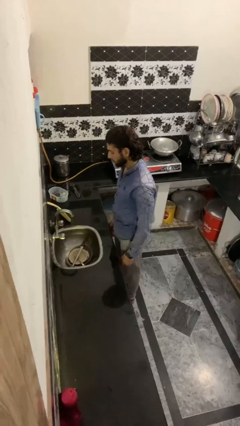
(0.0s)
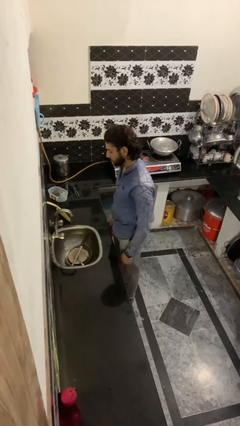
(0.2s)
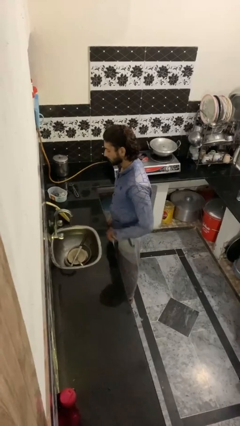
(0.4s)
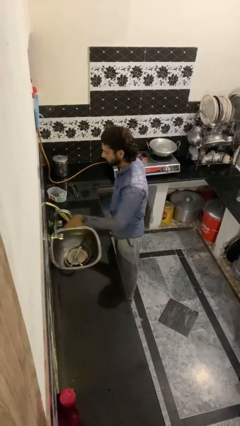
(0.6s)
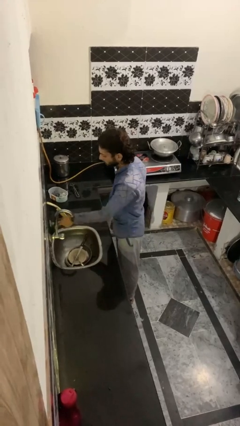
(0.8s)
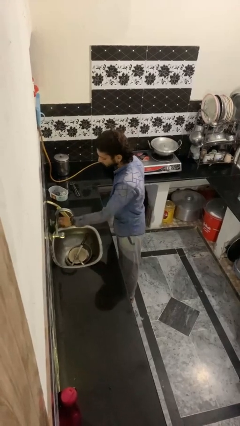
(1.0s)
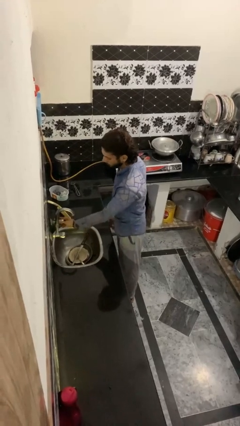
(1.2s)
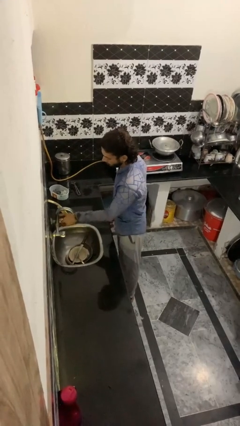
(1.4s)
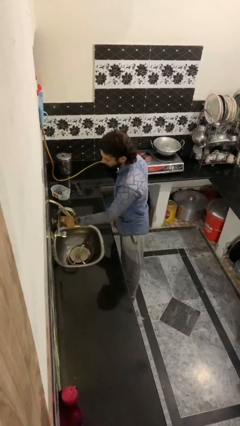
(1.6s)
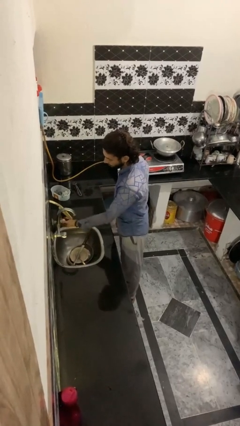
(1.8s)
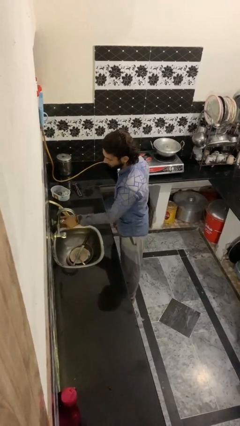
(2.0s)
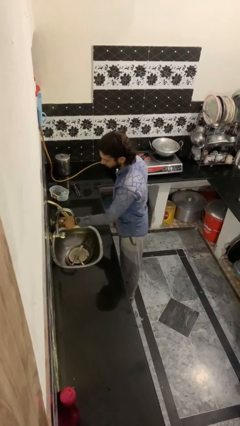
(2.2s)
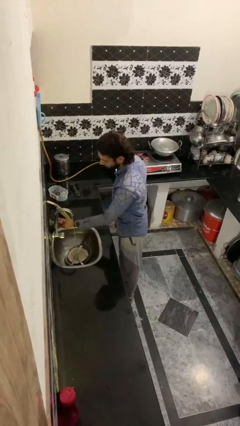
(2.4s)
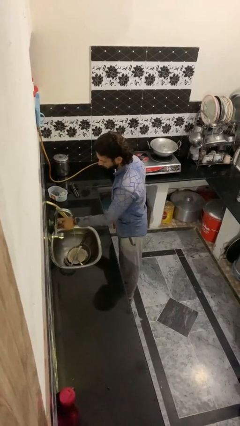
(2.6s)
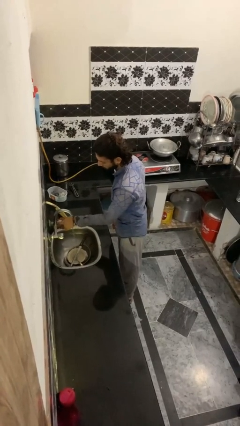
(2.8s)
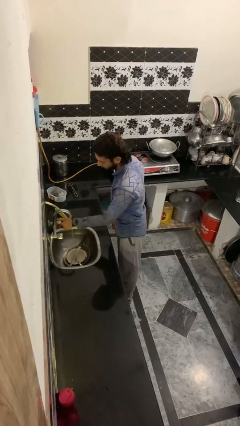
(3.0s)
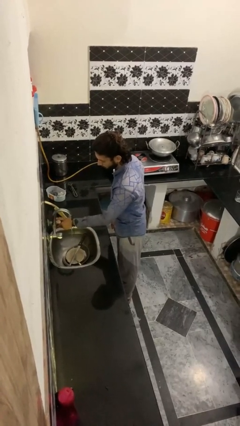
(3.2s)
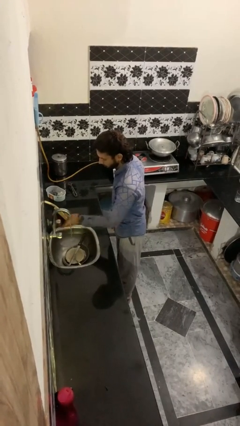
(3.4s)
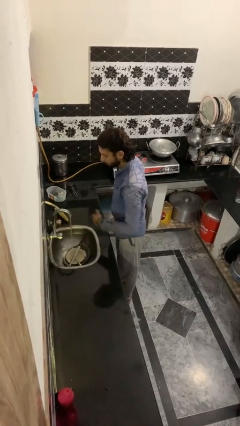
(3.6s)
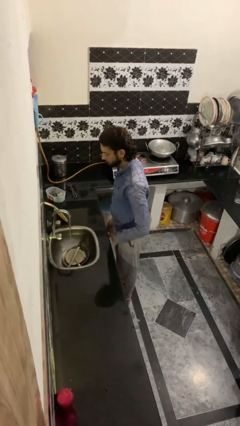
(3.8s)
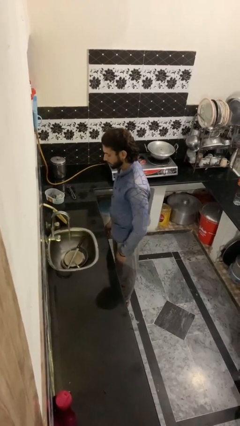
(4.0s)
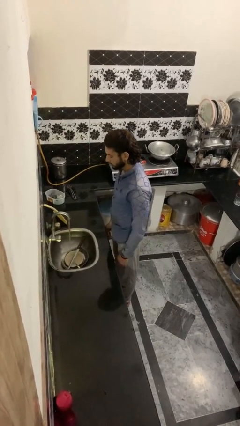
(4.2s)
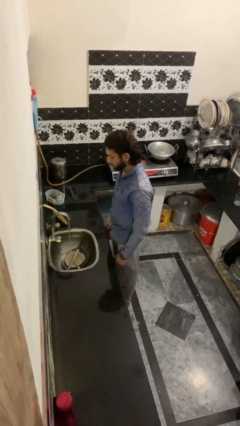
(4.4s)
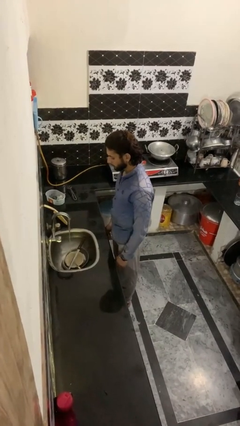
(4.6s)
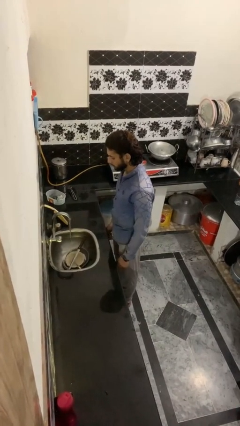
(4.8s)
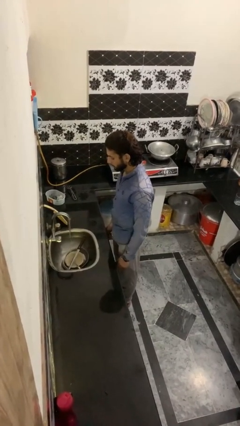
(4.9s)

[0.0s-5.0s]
person turns on faucet

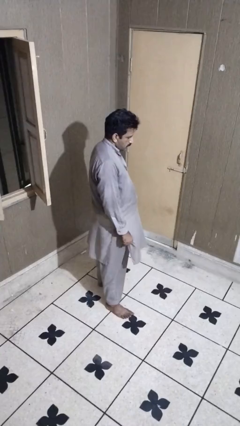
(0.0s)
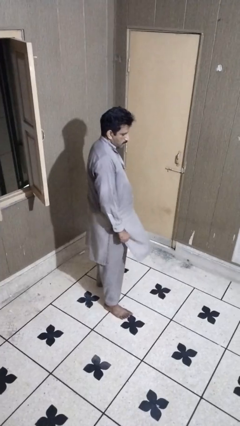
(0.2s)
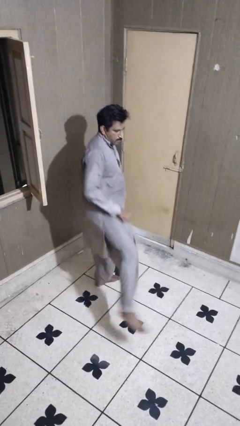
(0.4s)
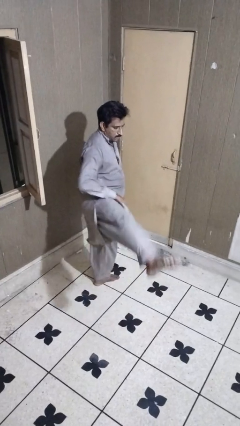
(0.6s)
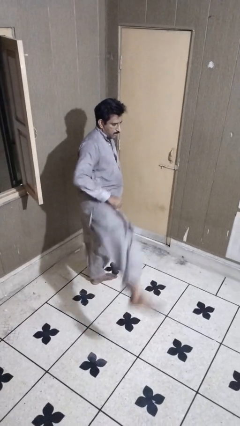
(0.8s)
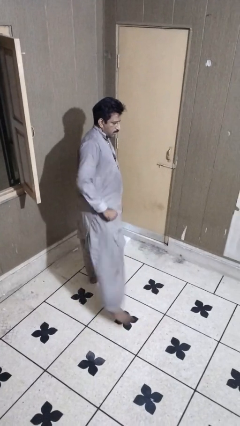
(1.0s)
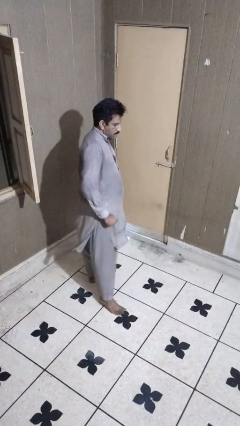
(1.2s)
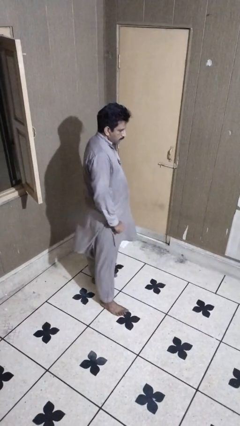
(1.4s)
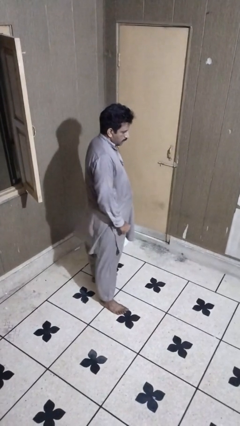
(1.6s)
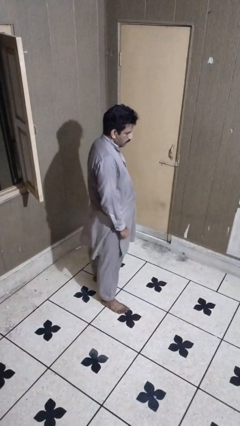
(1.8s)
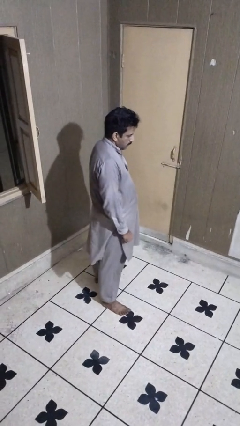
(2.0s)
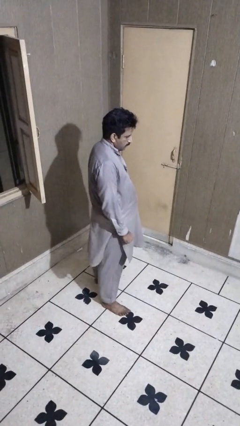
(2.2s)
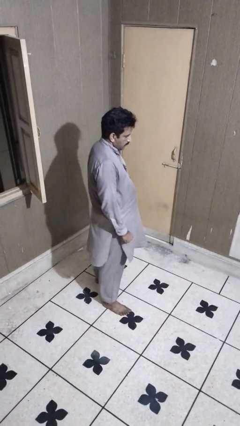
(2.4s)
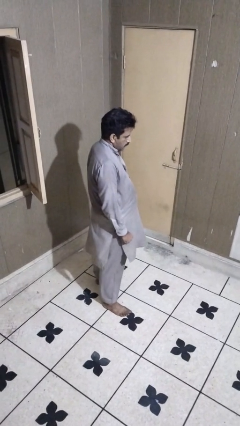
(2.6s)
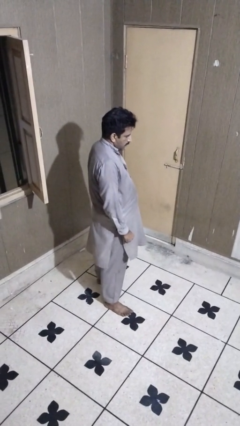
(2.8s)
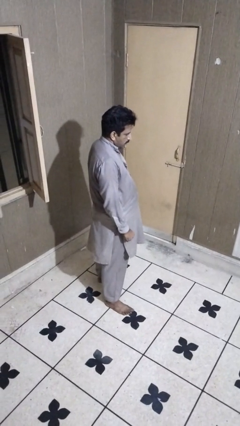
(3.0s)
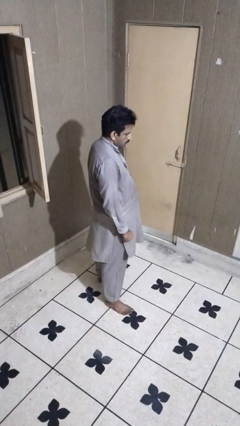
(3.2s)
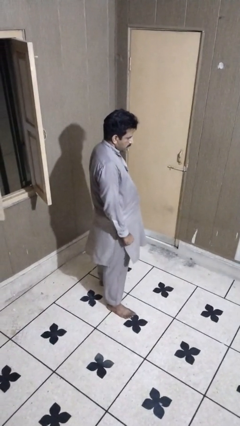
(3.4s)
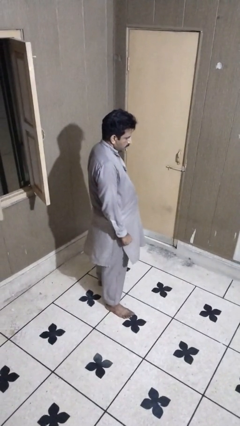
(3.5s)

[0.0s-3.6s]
person karate kicks

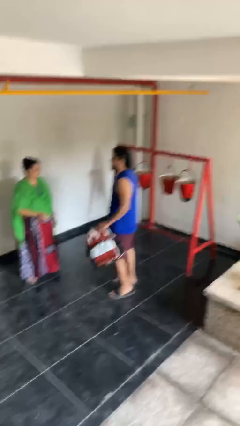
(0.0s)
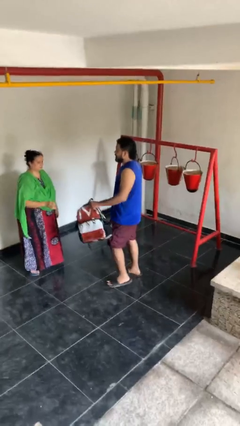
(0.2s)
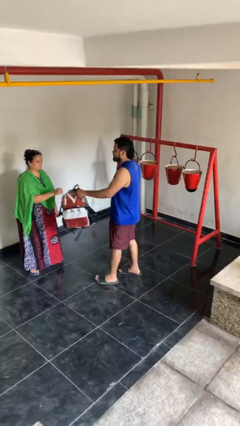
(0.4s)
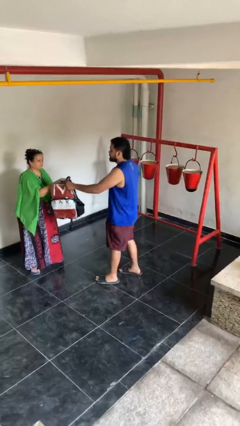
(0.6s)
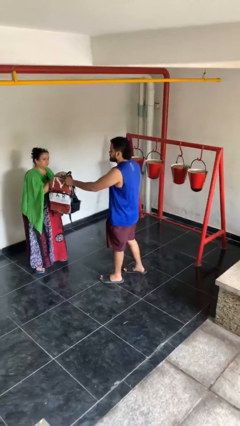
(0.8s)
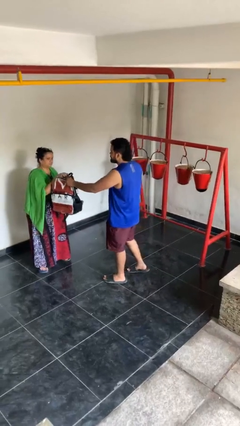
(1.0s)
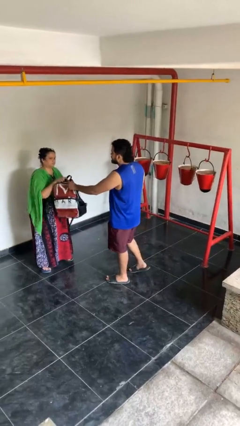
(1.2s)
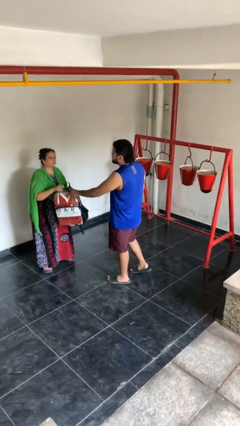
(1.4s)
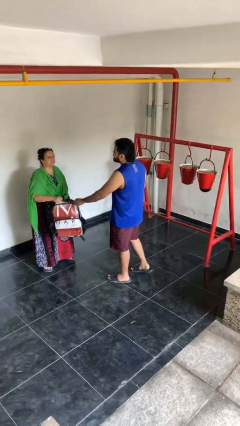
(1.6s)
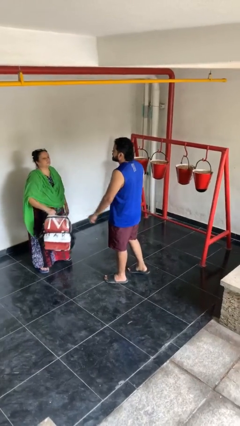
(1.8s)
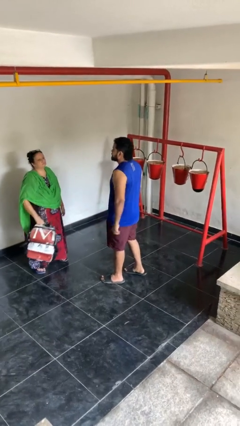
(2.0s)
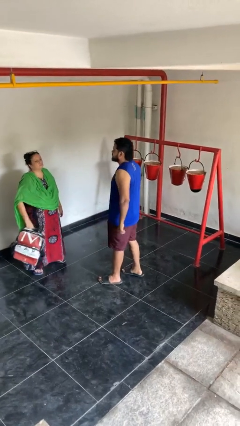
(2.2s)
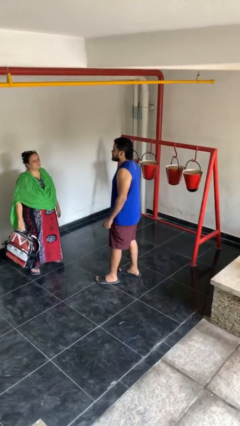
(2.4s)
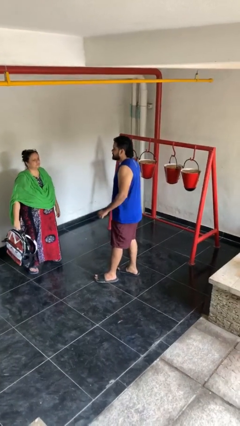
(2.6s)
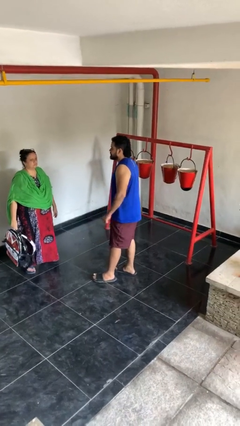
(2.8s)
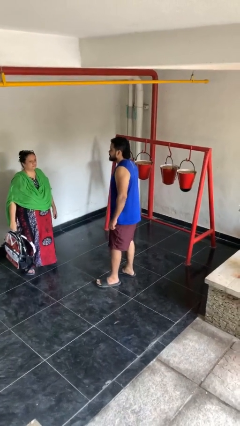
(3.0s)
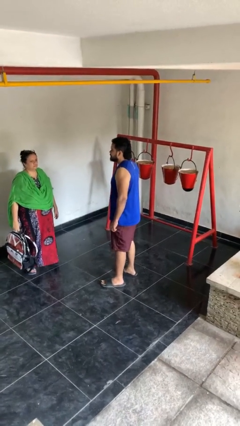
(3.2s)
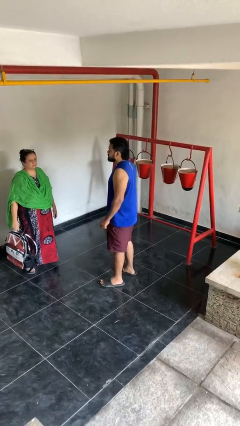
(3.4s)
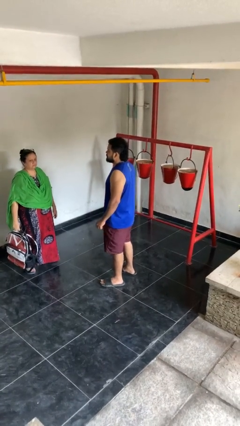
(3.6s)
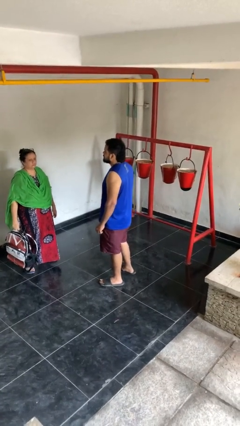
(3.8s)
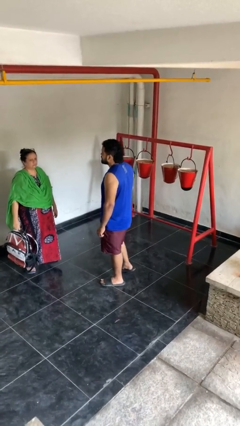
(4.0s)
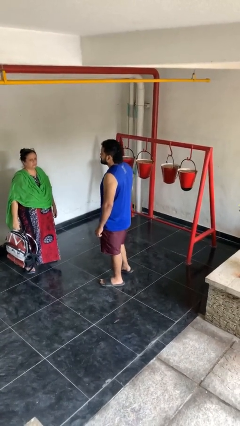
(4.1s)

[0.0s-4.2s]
person transfers object to person

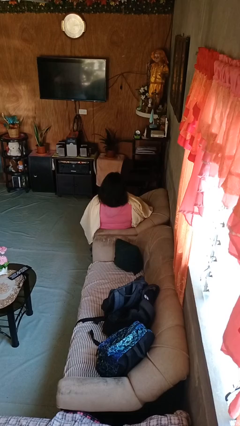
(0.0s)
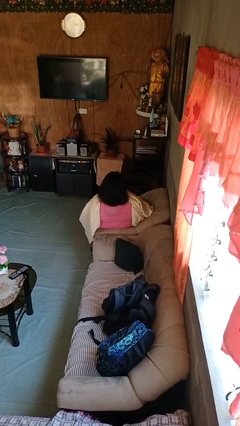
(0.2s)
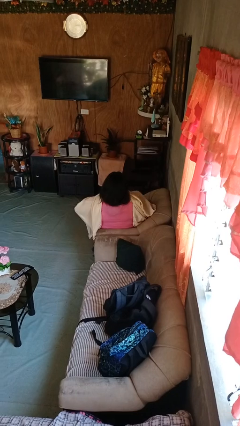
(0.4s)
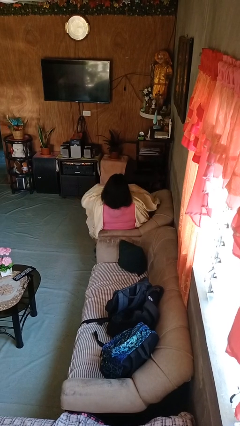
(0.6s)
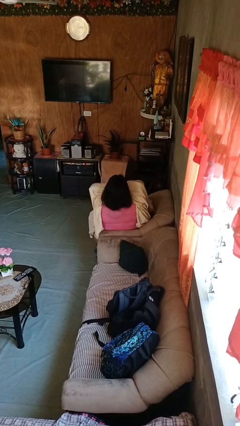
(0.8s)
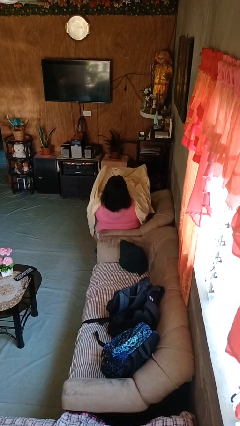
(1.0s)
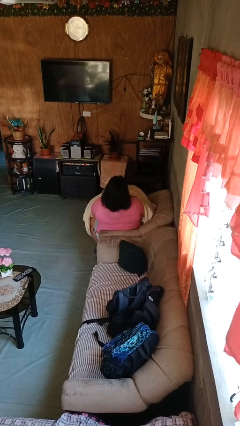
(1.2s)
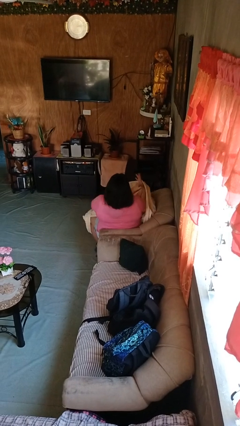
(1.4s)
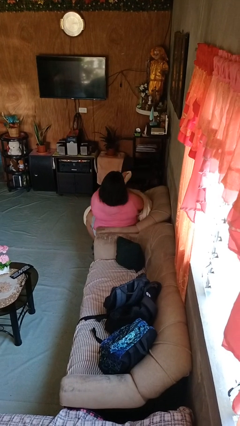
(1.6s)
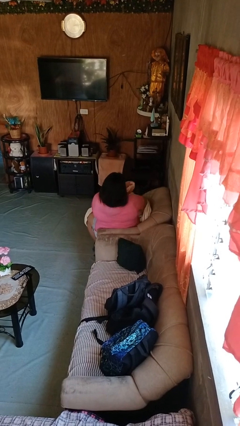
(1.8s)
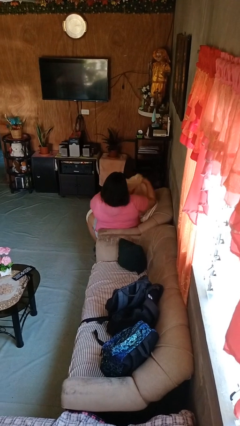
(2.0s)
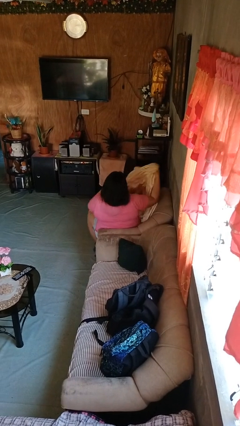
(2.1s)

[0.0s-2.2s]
person uncovers with blanket

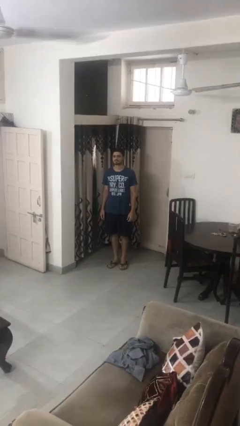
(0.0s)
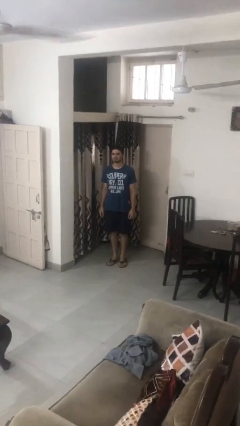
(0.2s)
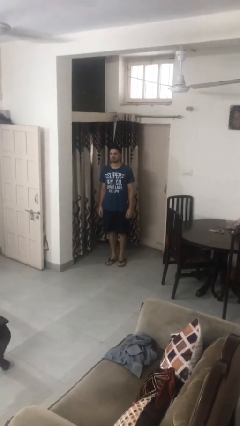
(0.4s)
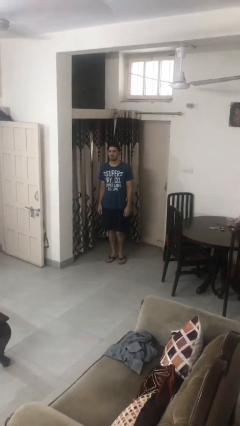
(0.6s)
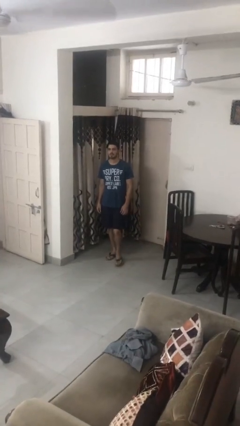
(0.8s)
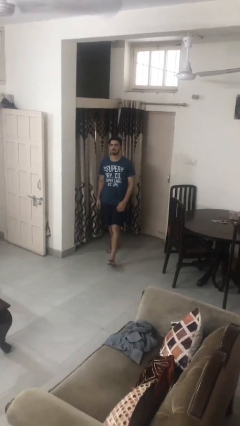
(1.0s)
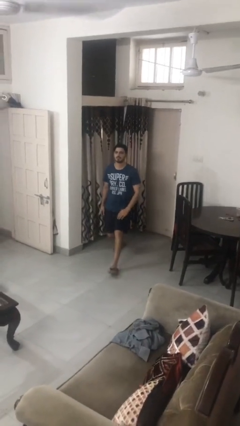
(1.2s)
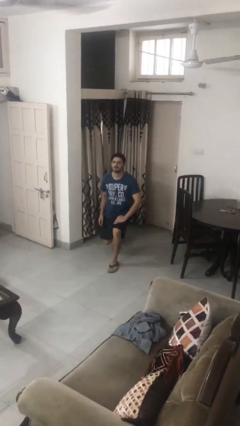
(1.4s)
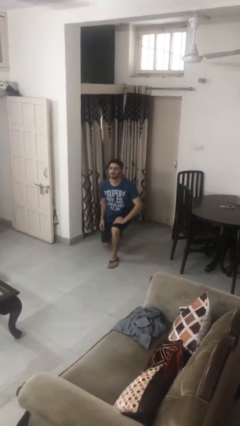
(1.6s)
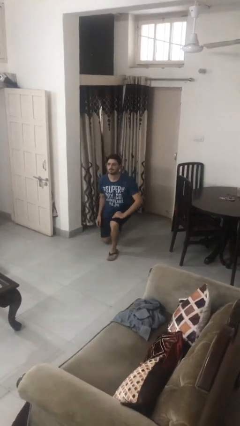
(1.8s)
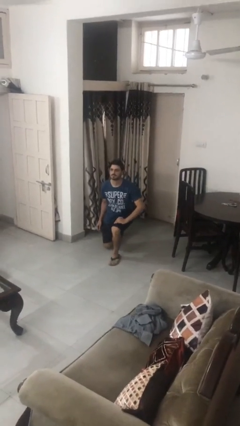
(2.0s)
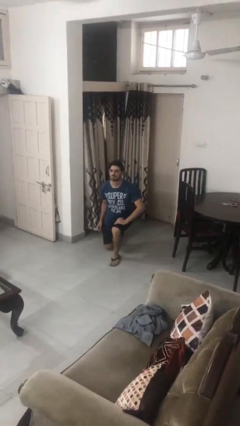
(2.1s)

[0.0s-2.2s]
person kneels

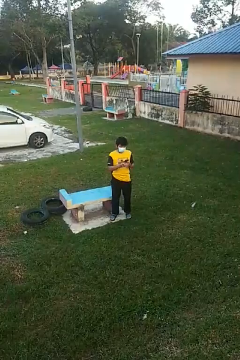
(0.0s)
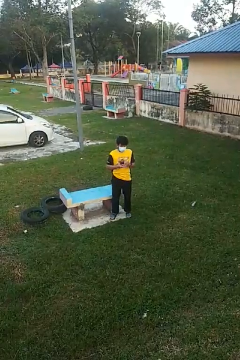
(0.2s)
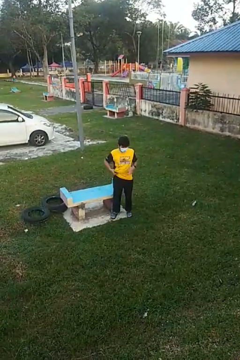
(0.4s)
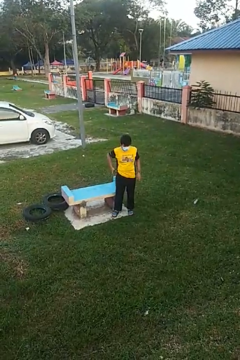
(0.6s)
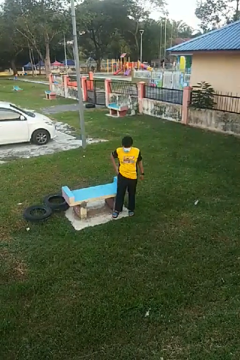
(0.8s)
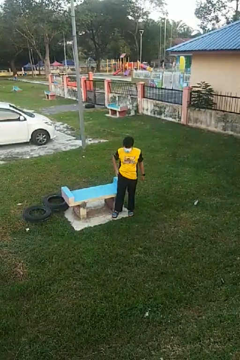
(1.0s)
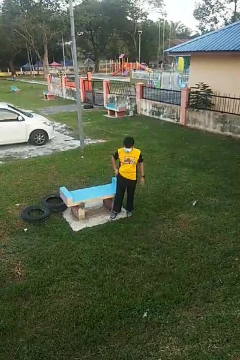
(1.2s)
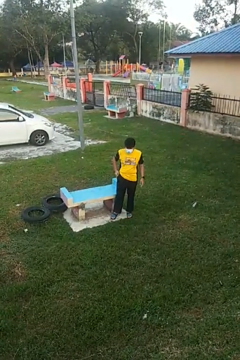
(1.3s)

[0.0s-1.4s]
person puts phone into pocket
